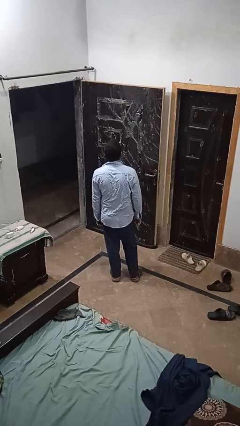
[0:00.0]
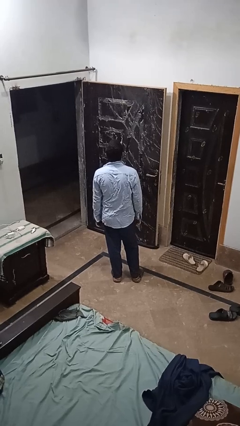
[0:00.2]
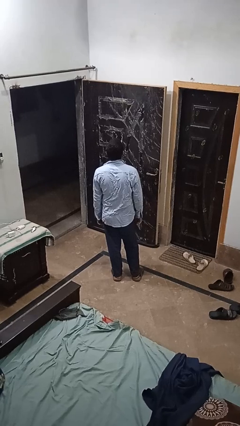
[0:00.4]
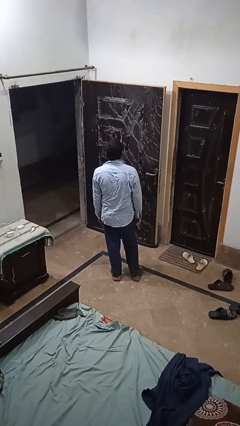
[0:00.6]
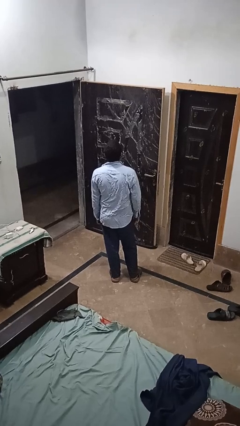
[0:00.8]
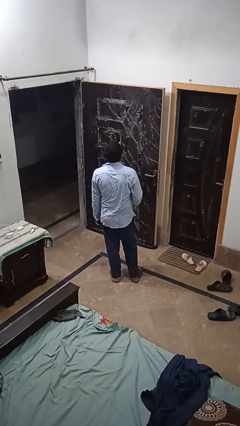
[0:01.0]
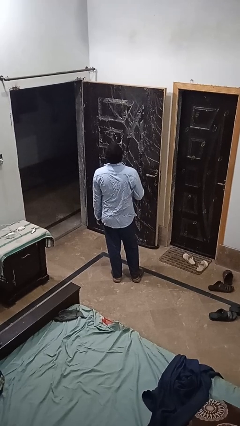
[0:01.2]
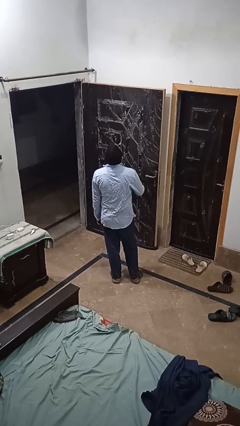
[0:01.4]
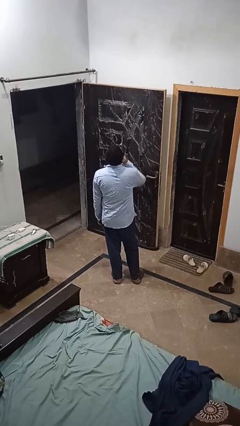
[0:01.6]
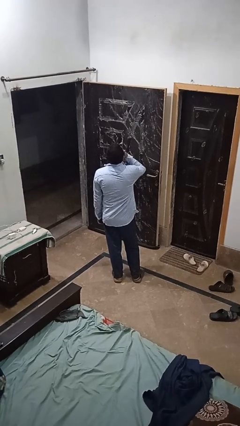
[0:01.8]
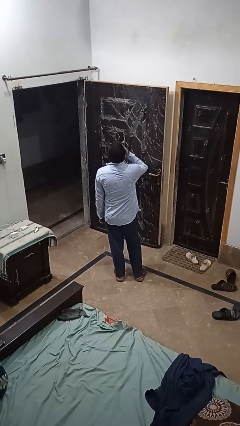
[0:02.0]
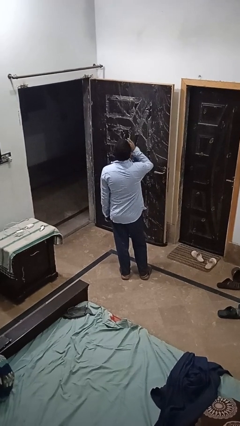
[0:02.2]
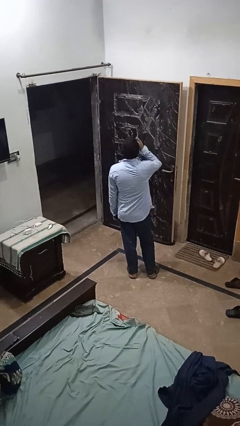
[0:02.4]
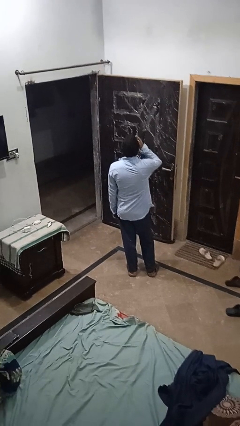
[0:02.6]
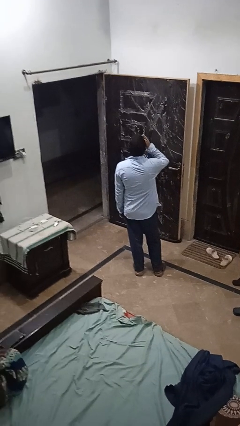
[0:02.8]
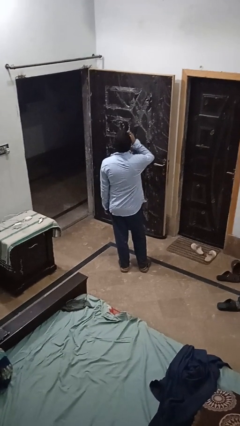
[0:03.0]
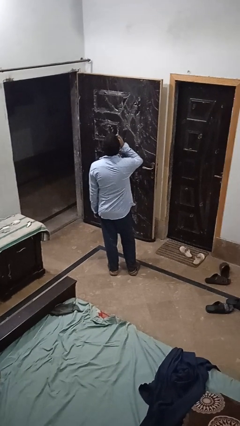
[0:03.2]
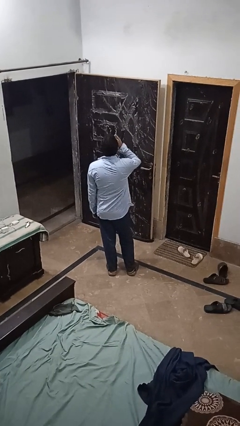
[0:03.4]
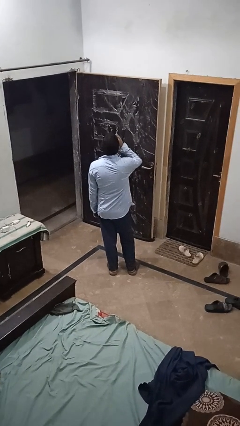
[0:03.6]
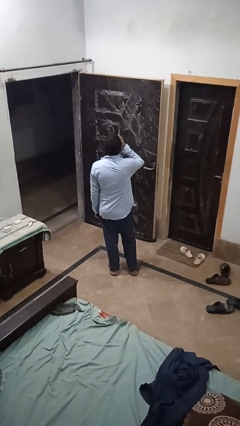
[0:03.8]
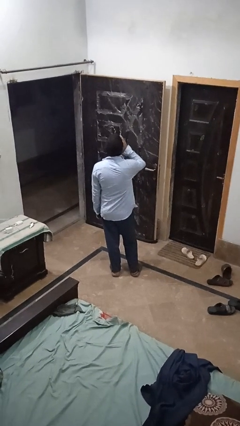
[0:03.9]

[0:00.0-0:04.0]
person yawns

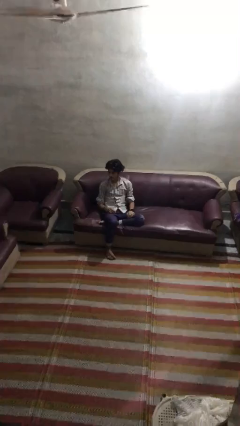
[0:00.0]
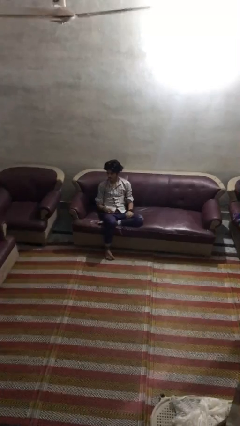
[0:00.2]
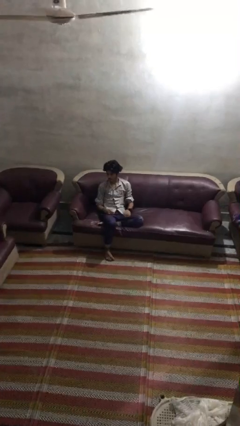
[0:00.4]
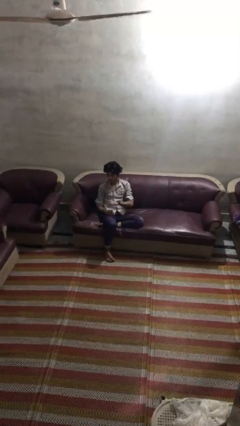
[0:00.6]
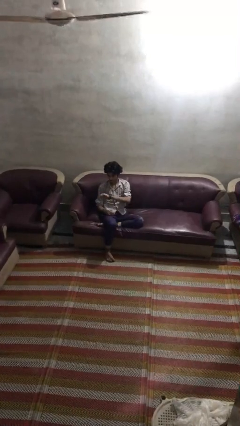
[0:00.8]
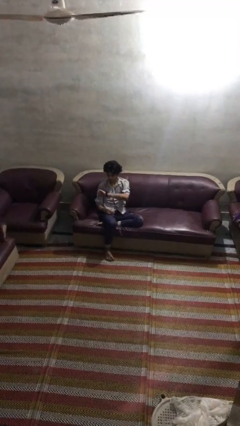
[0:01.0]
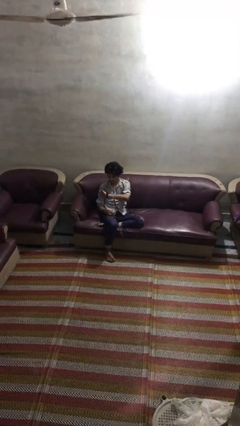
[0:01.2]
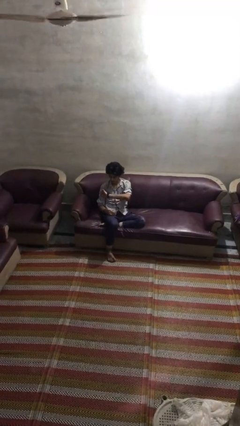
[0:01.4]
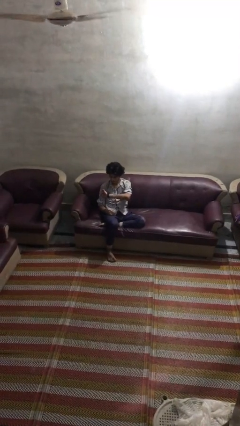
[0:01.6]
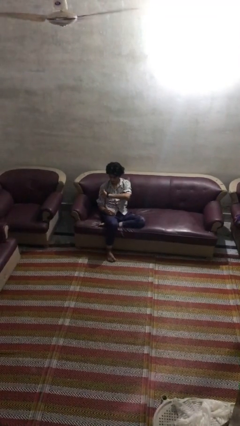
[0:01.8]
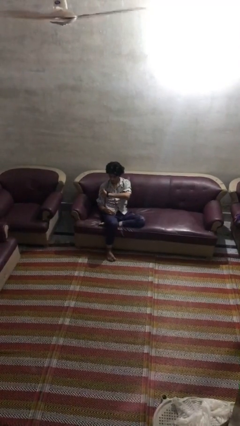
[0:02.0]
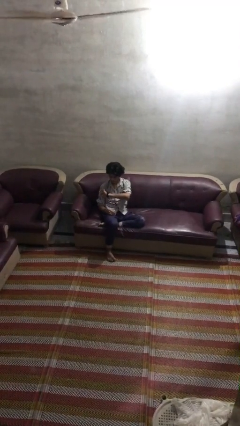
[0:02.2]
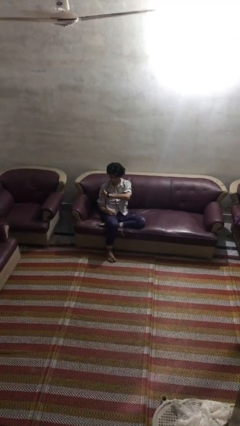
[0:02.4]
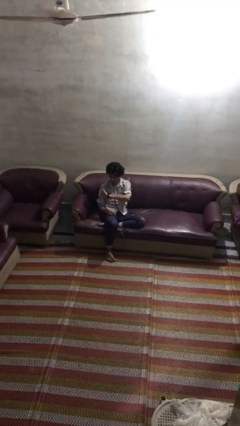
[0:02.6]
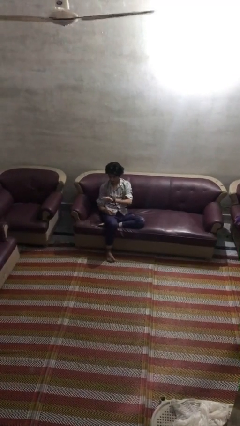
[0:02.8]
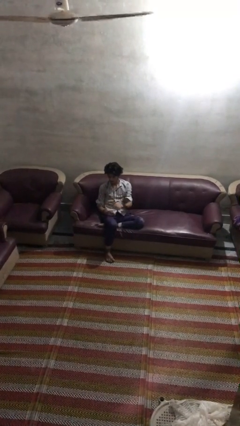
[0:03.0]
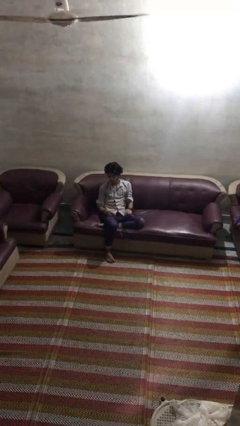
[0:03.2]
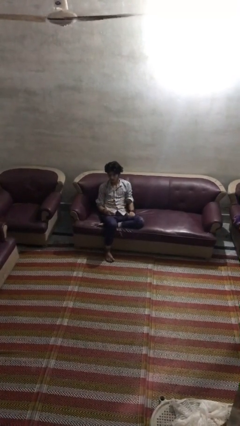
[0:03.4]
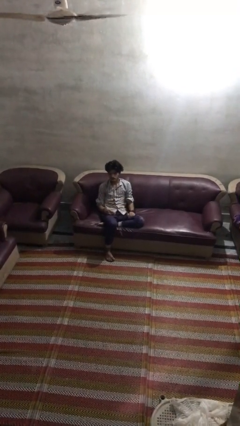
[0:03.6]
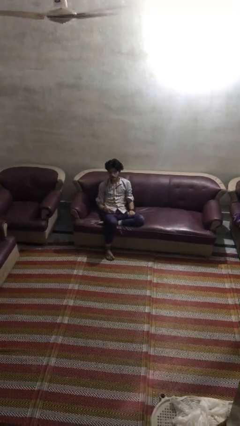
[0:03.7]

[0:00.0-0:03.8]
person looks at wristwatch

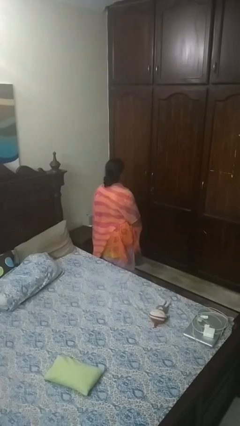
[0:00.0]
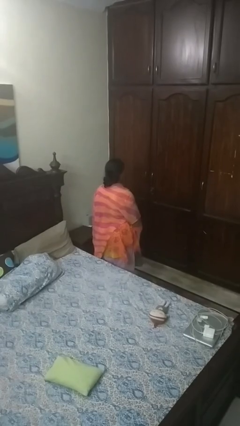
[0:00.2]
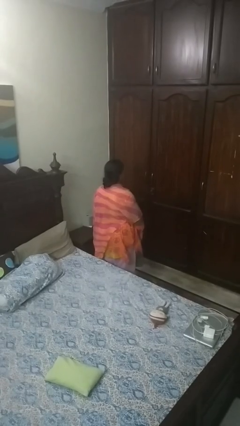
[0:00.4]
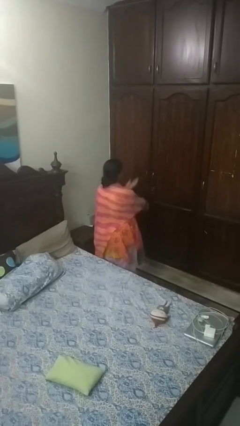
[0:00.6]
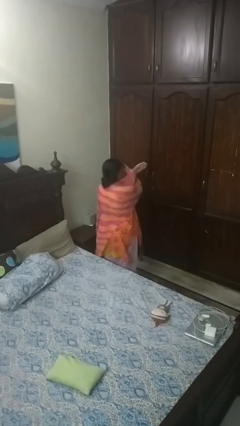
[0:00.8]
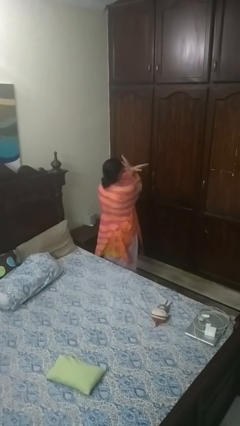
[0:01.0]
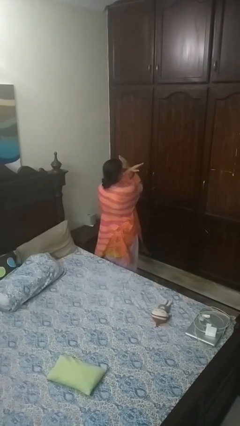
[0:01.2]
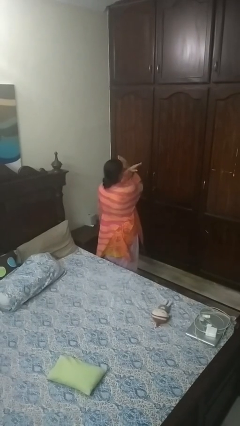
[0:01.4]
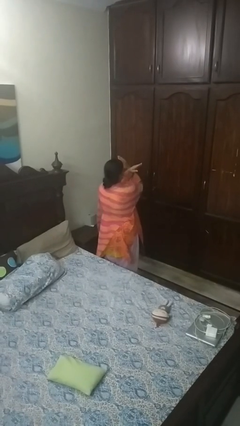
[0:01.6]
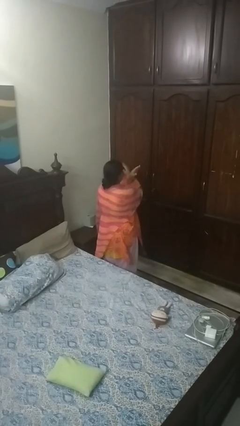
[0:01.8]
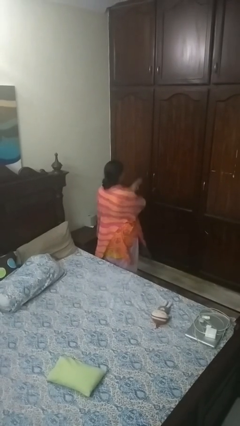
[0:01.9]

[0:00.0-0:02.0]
person gestures arms x

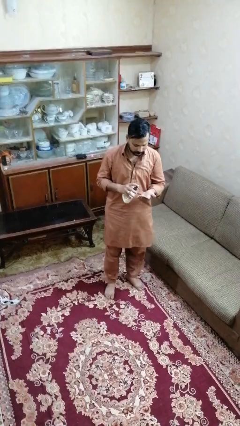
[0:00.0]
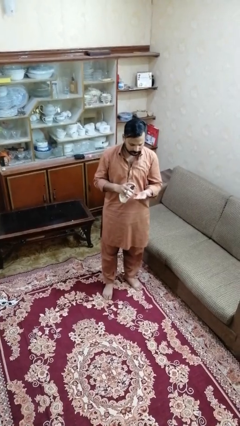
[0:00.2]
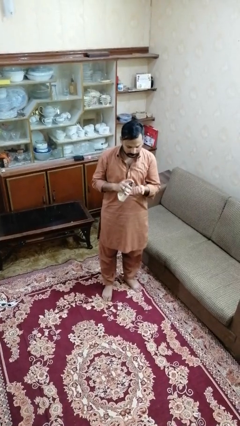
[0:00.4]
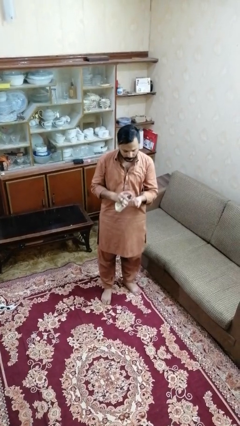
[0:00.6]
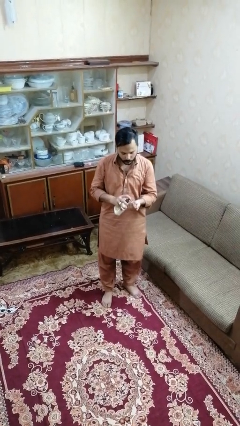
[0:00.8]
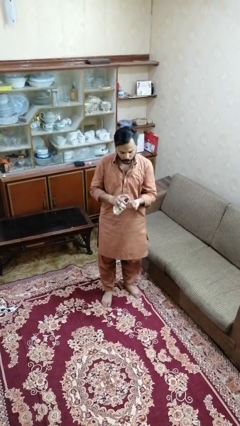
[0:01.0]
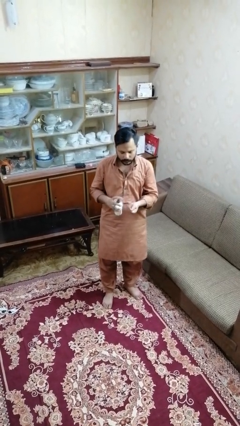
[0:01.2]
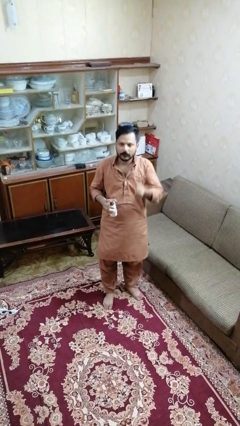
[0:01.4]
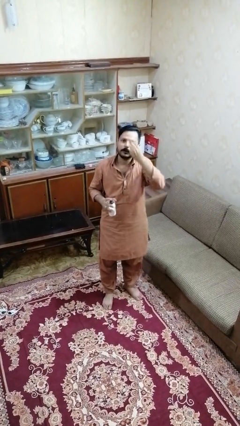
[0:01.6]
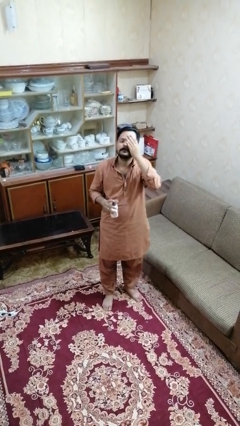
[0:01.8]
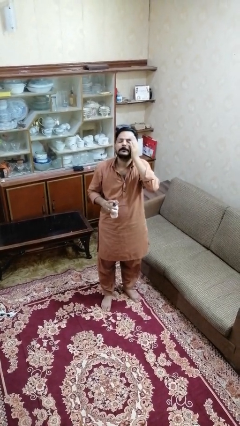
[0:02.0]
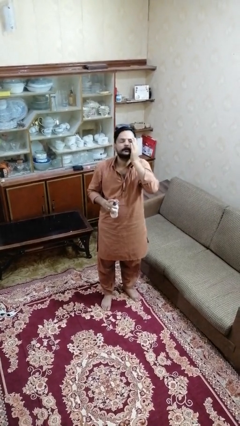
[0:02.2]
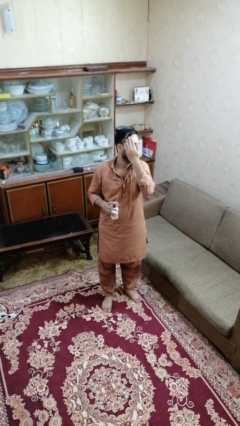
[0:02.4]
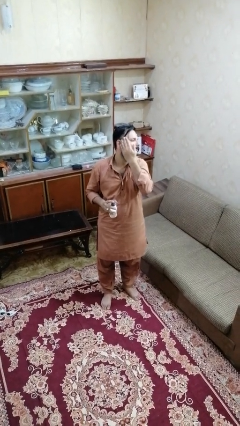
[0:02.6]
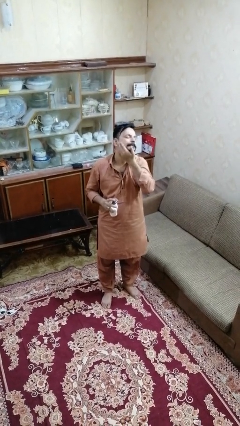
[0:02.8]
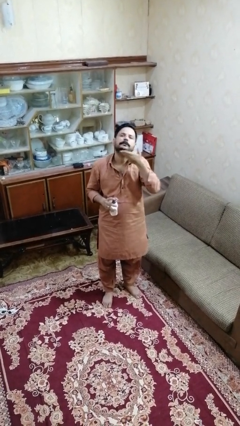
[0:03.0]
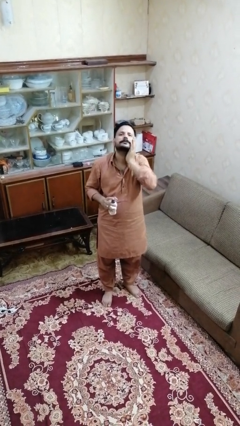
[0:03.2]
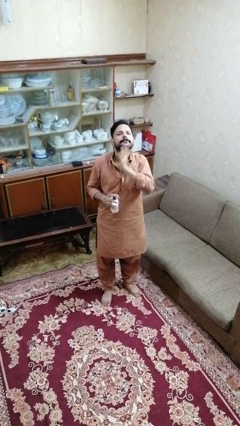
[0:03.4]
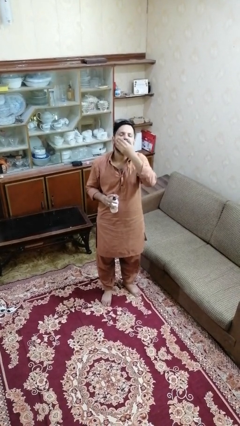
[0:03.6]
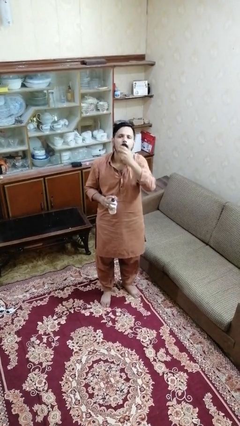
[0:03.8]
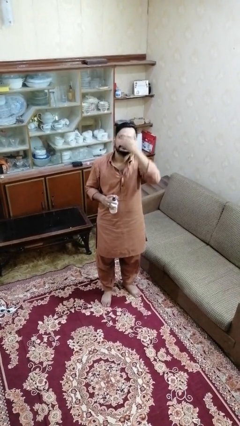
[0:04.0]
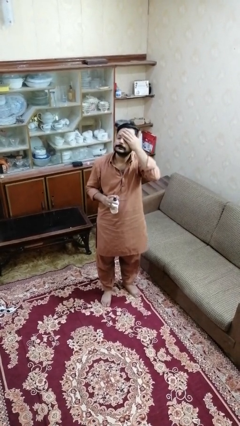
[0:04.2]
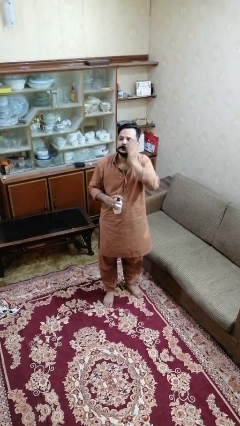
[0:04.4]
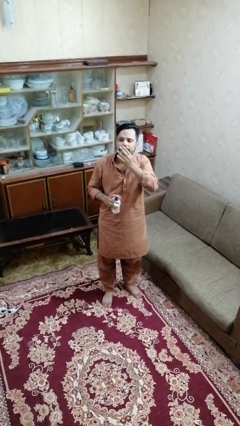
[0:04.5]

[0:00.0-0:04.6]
person applies facial moisturizer

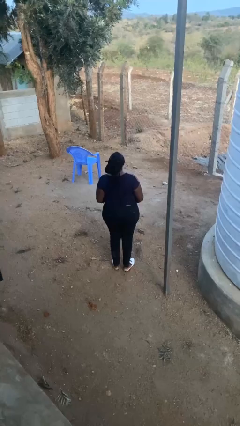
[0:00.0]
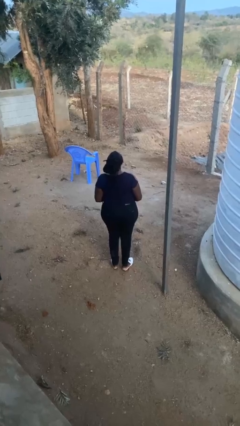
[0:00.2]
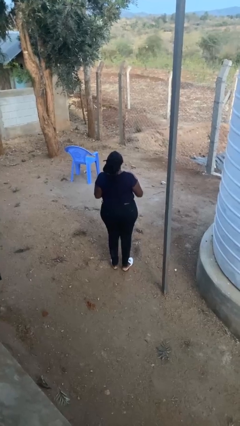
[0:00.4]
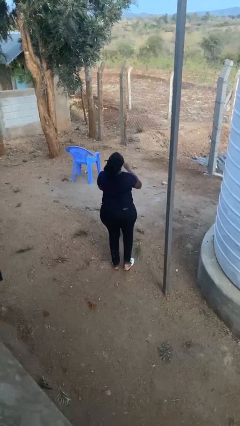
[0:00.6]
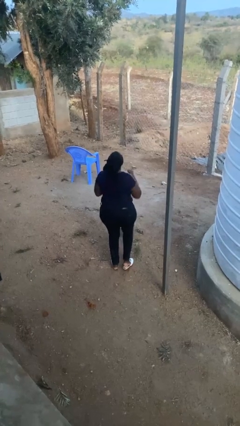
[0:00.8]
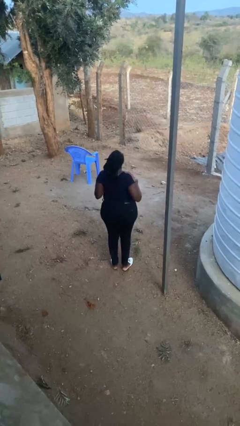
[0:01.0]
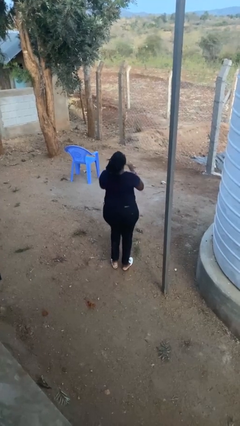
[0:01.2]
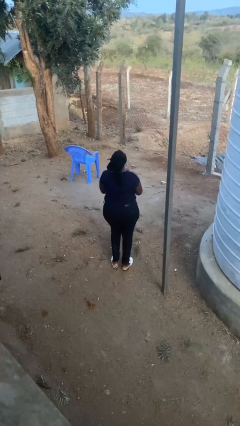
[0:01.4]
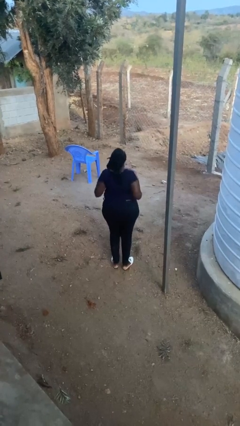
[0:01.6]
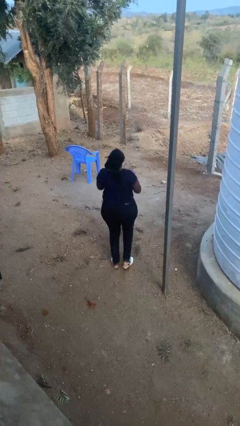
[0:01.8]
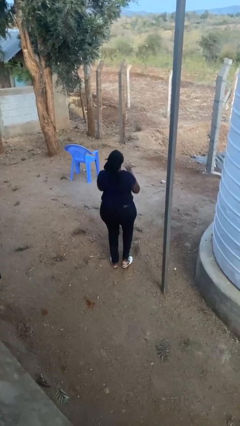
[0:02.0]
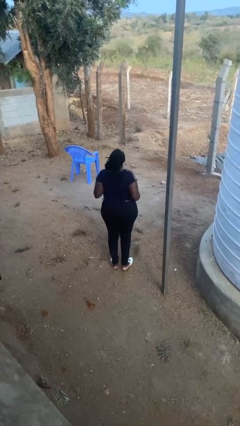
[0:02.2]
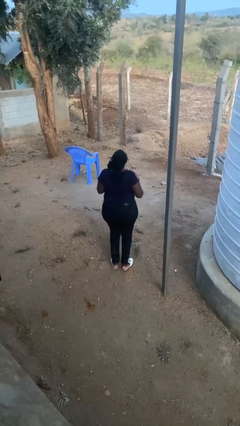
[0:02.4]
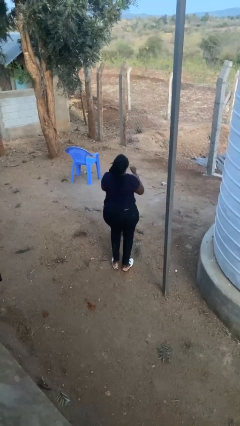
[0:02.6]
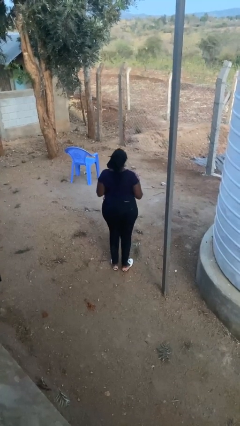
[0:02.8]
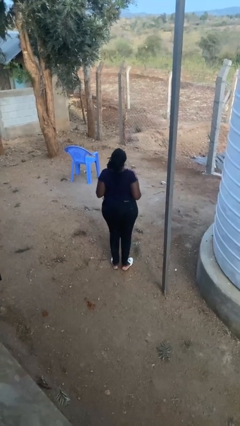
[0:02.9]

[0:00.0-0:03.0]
person dances in place
